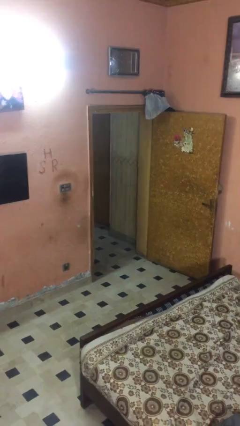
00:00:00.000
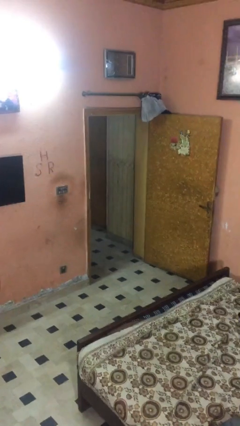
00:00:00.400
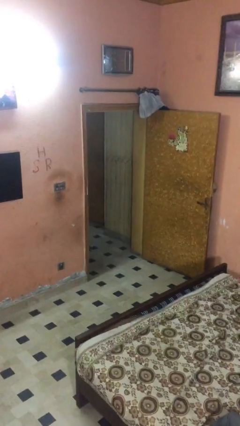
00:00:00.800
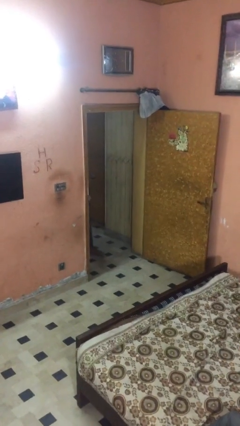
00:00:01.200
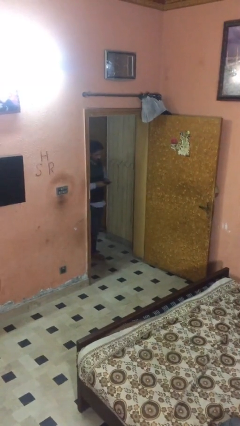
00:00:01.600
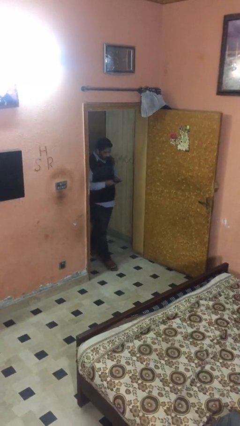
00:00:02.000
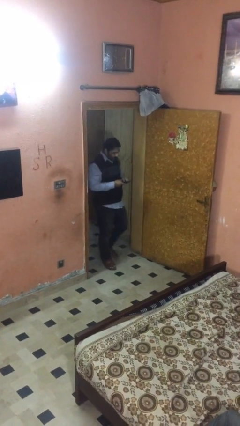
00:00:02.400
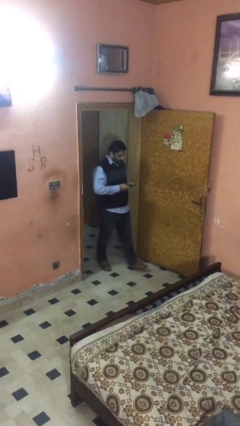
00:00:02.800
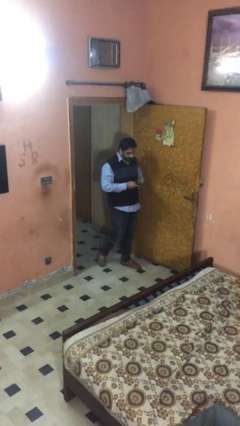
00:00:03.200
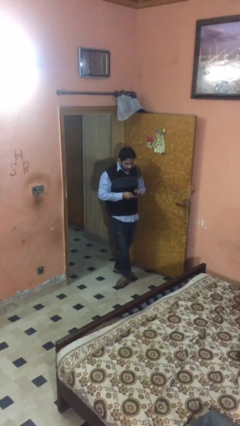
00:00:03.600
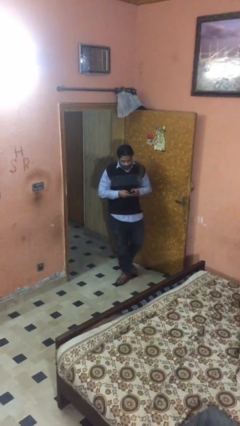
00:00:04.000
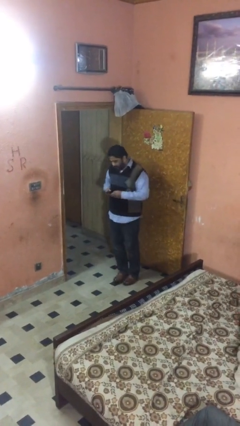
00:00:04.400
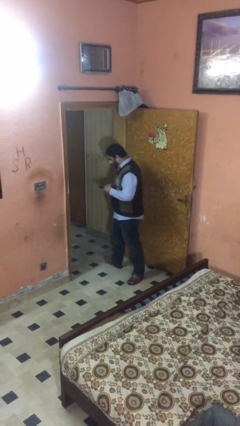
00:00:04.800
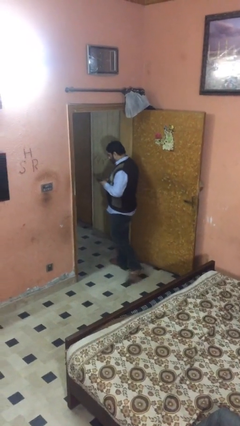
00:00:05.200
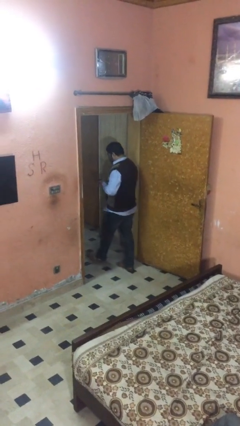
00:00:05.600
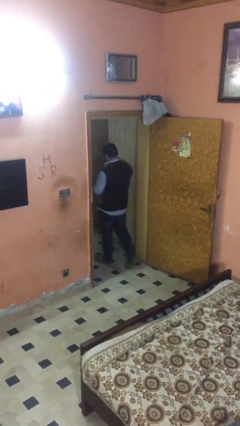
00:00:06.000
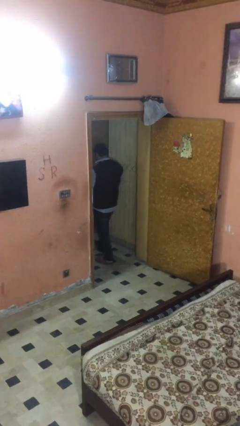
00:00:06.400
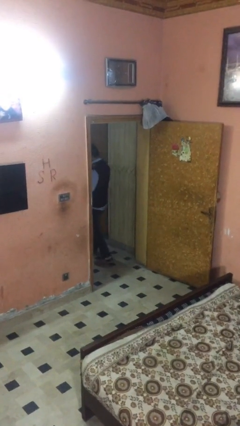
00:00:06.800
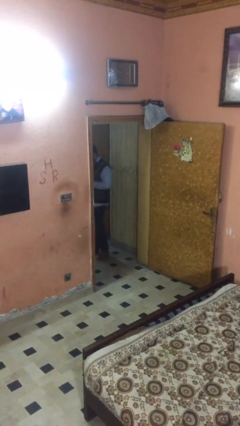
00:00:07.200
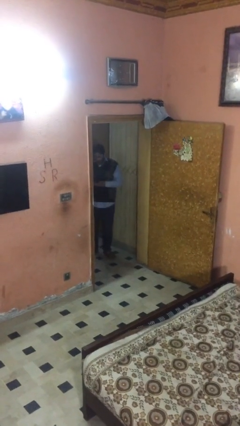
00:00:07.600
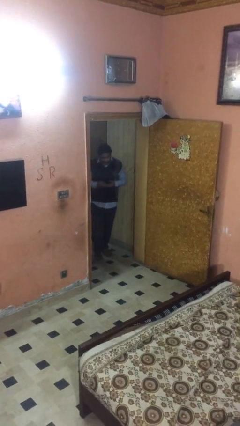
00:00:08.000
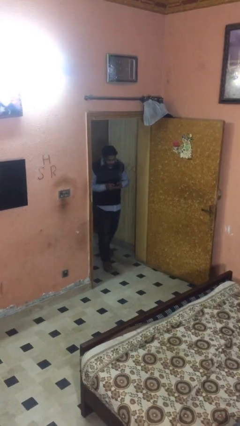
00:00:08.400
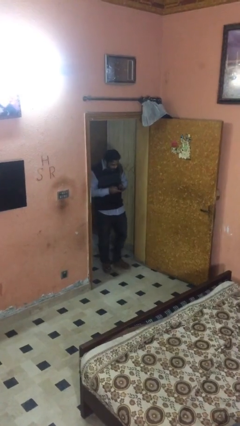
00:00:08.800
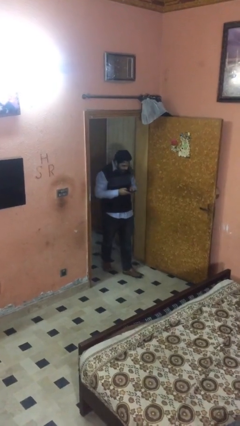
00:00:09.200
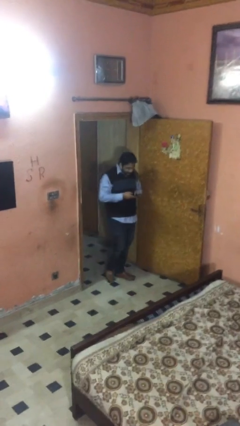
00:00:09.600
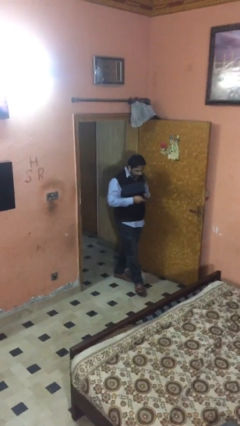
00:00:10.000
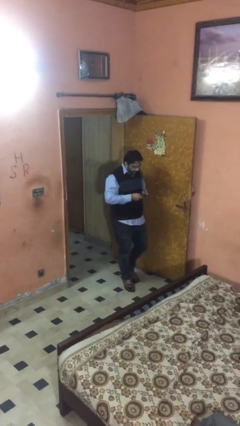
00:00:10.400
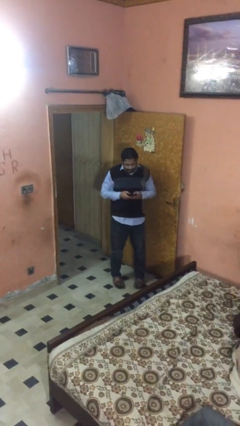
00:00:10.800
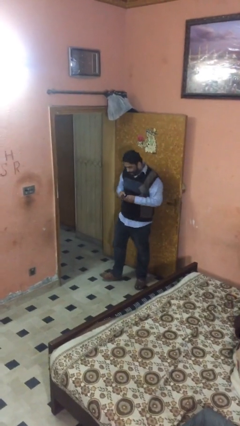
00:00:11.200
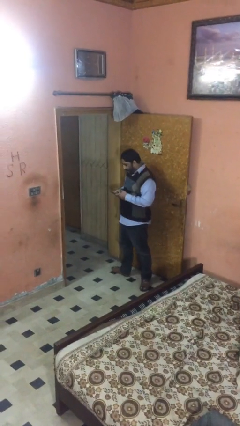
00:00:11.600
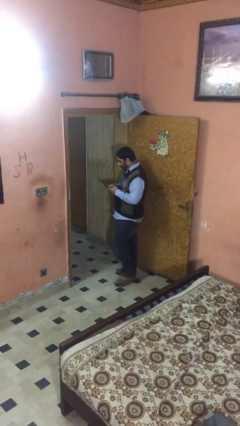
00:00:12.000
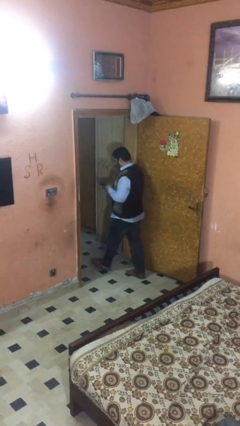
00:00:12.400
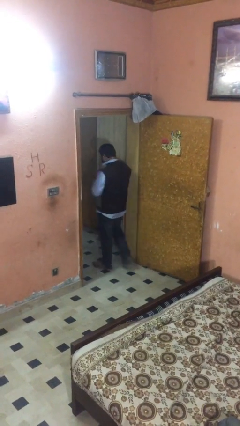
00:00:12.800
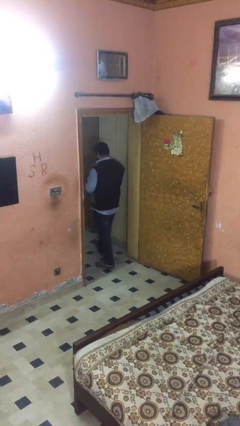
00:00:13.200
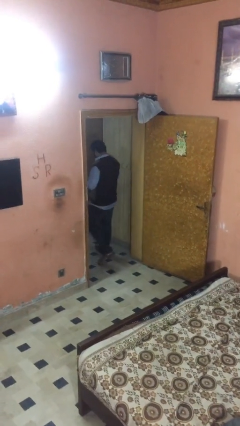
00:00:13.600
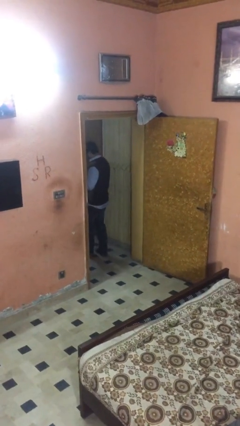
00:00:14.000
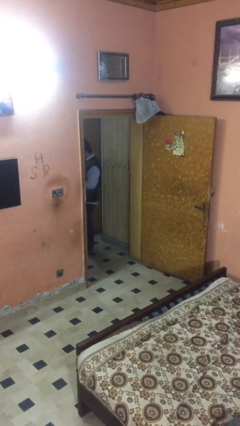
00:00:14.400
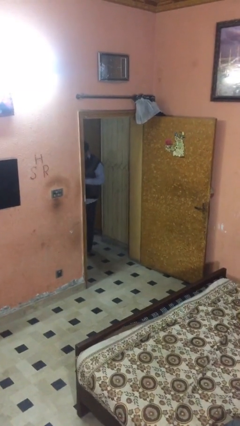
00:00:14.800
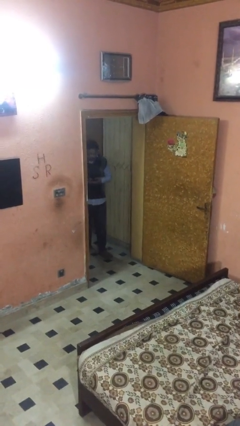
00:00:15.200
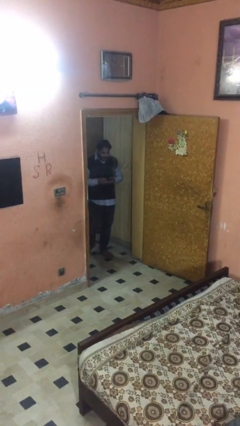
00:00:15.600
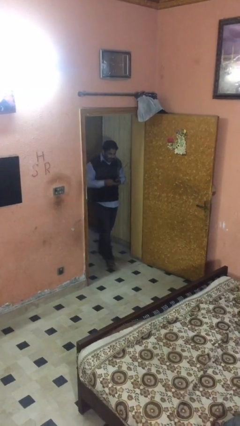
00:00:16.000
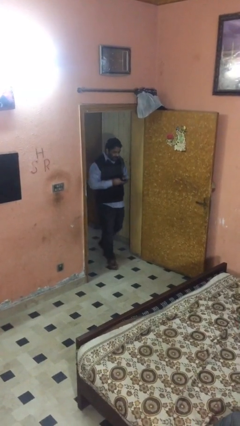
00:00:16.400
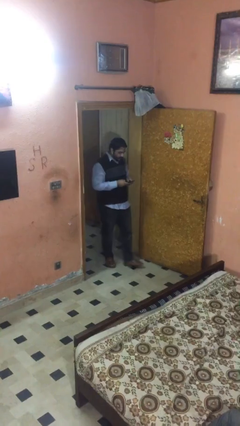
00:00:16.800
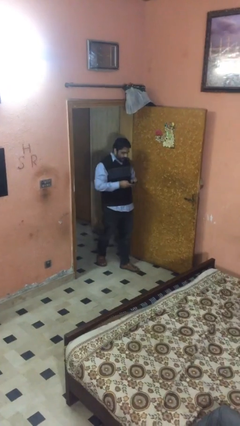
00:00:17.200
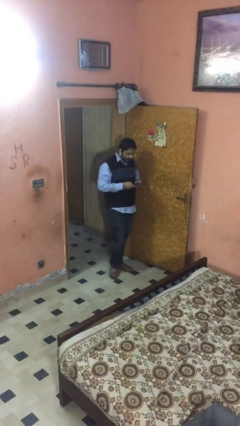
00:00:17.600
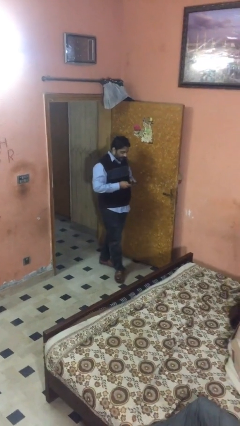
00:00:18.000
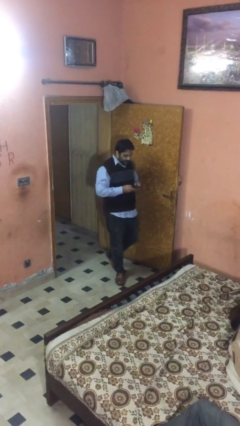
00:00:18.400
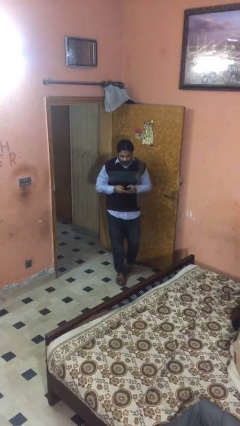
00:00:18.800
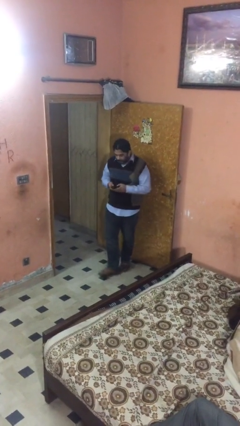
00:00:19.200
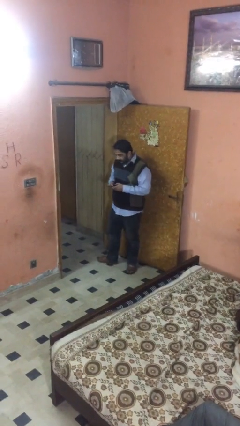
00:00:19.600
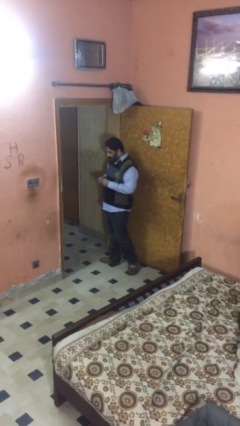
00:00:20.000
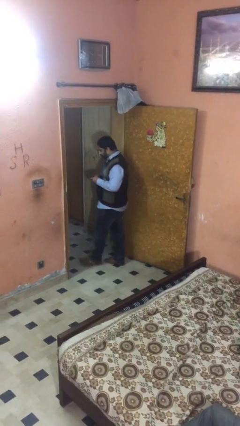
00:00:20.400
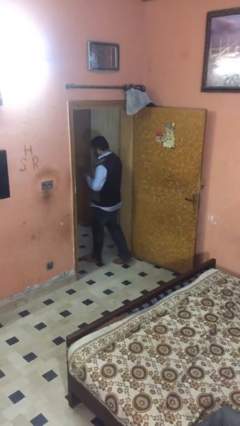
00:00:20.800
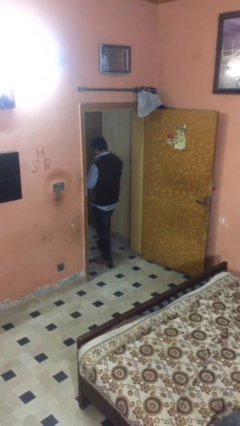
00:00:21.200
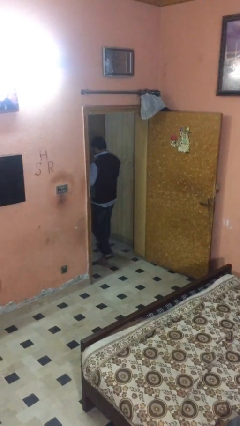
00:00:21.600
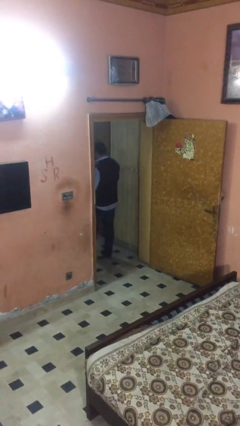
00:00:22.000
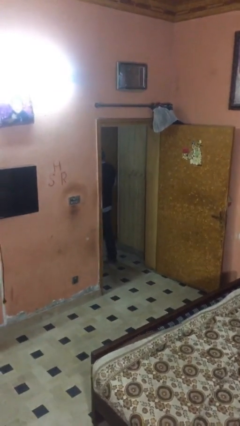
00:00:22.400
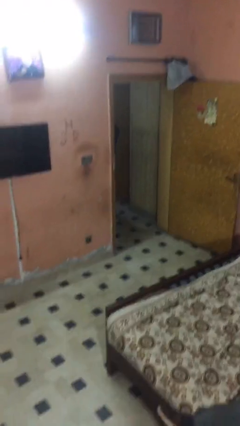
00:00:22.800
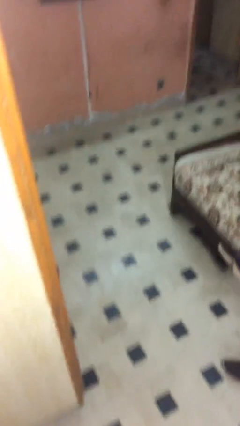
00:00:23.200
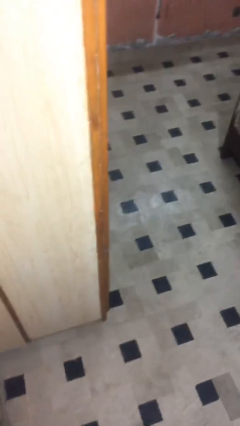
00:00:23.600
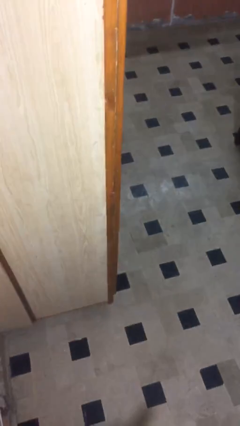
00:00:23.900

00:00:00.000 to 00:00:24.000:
person texts on phone

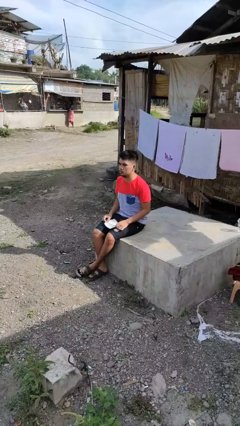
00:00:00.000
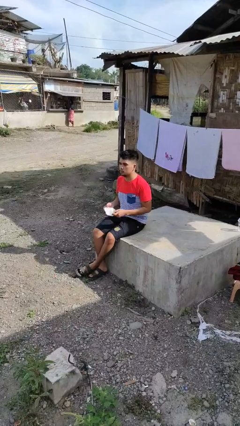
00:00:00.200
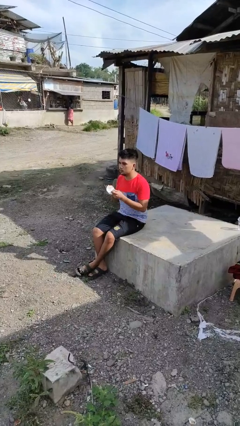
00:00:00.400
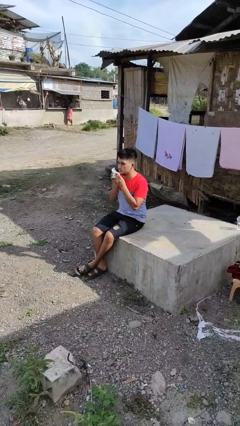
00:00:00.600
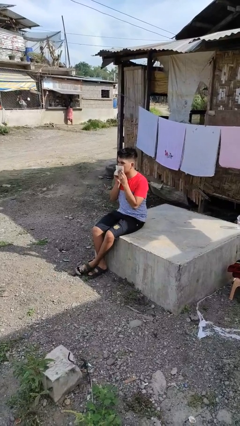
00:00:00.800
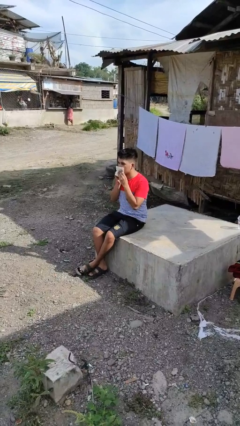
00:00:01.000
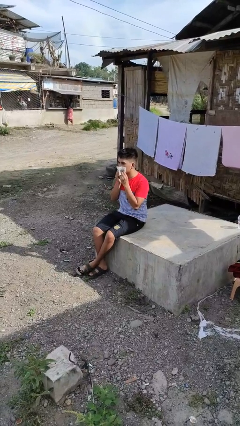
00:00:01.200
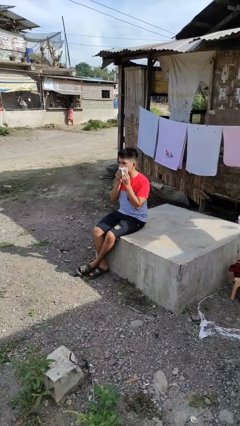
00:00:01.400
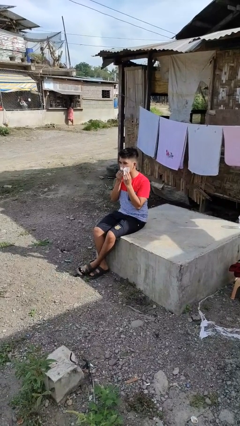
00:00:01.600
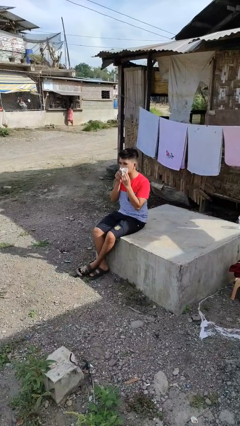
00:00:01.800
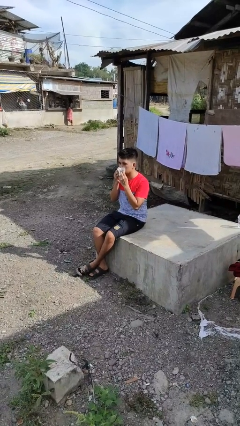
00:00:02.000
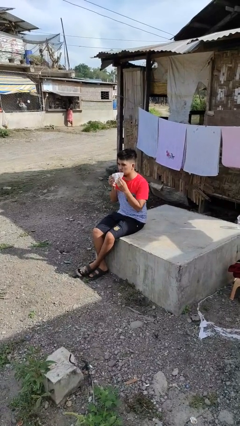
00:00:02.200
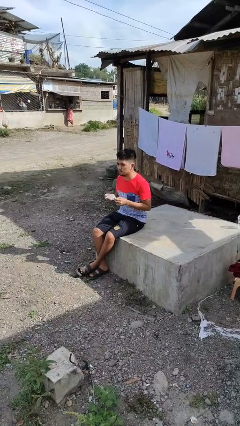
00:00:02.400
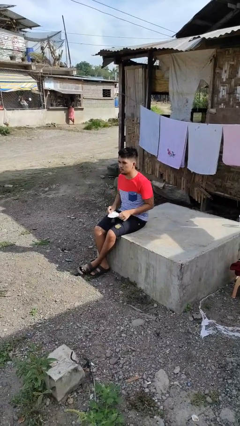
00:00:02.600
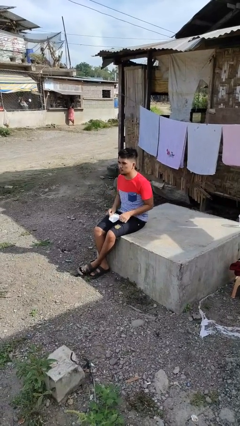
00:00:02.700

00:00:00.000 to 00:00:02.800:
person wipes mouth with napkin

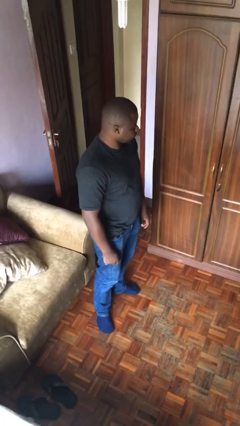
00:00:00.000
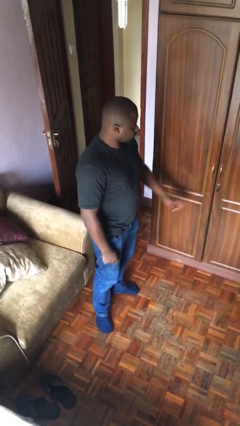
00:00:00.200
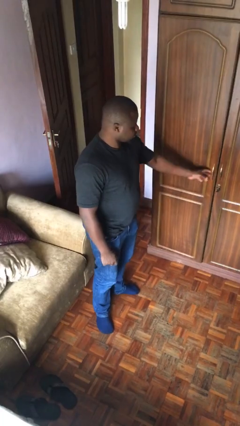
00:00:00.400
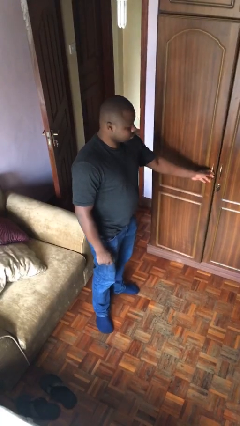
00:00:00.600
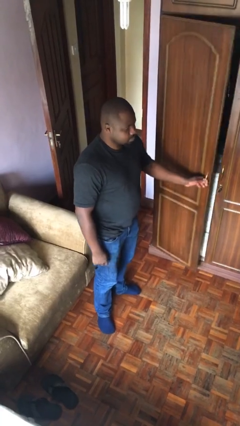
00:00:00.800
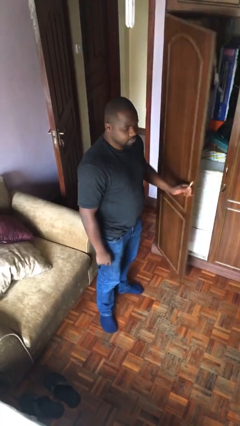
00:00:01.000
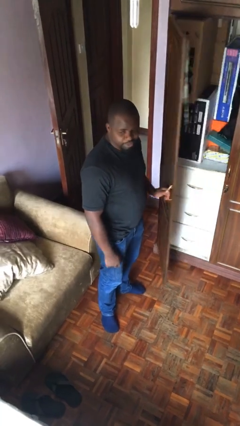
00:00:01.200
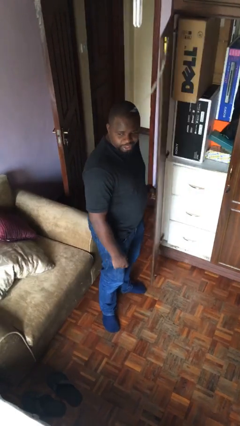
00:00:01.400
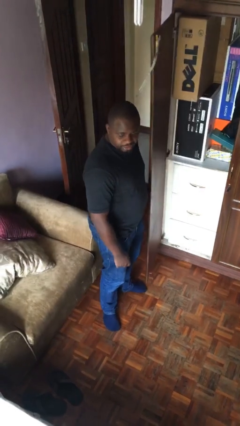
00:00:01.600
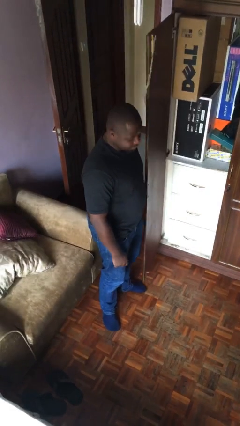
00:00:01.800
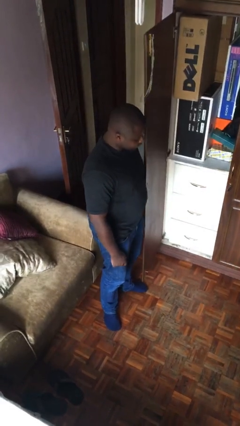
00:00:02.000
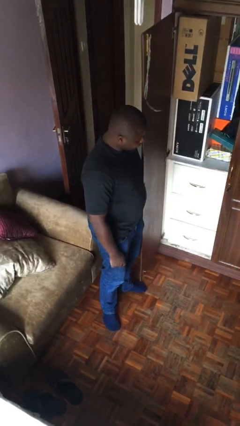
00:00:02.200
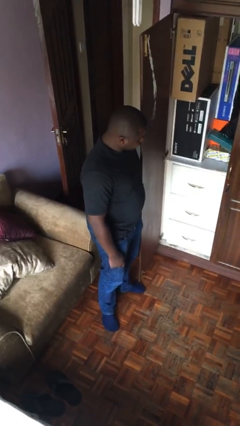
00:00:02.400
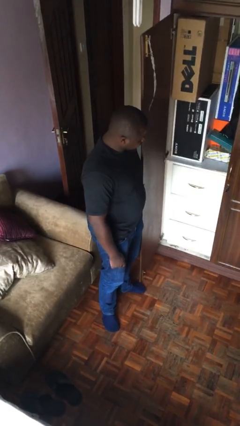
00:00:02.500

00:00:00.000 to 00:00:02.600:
person opens dresser drawer

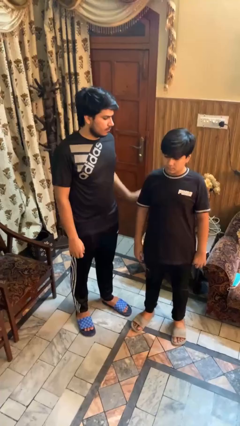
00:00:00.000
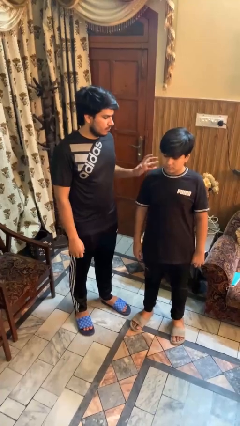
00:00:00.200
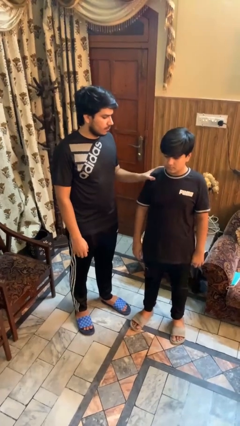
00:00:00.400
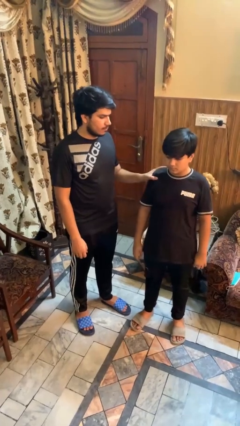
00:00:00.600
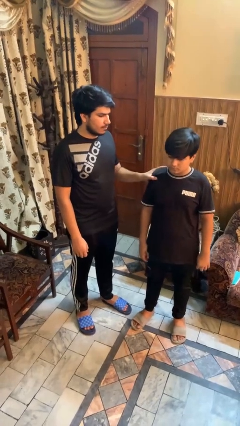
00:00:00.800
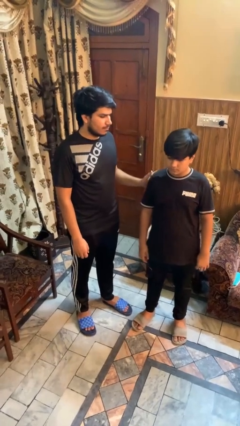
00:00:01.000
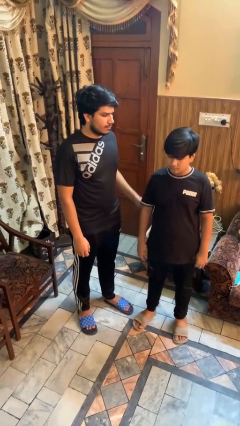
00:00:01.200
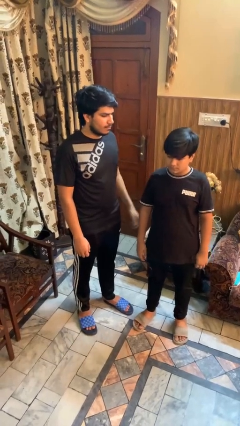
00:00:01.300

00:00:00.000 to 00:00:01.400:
person tickles person
